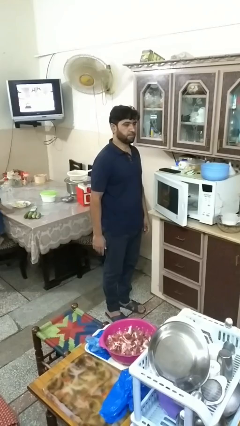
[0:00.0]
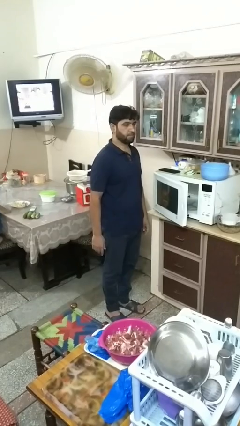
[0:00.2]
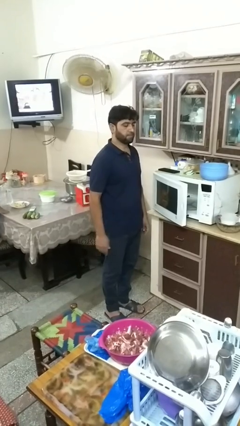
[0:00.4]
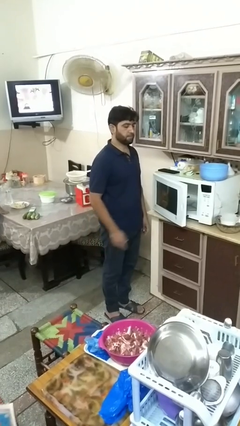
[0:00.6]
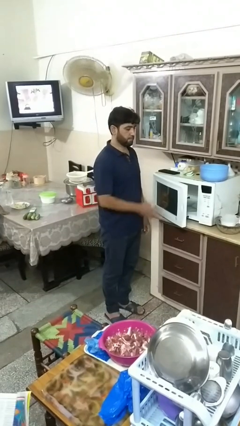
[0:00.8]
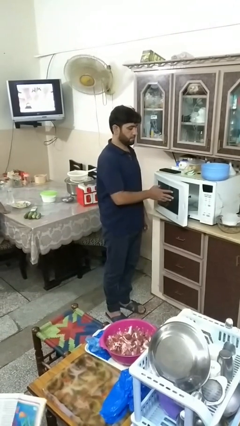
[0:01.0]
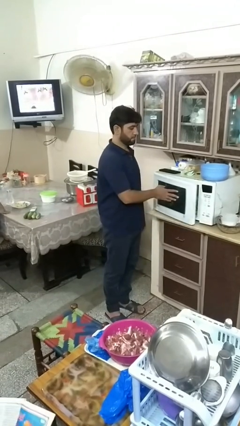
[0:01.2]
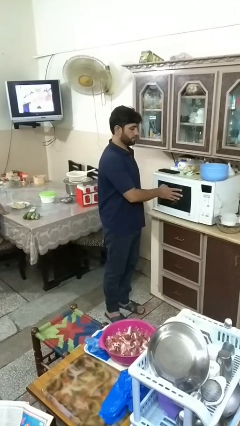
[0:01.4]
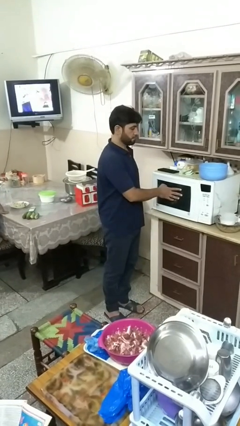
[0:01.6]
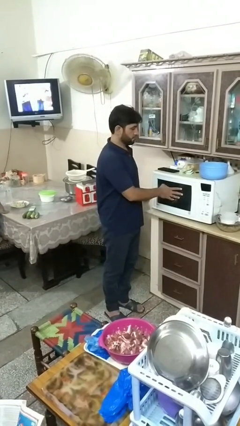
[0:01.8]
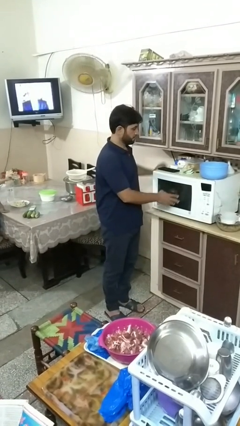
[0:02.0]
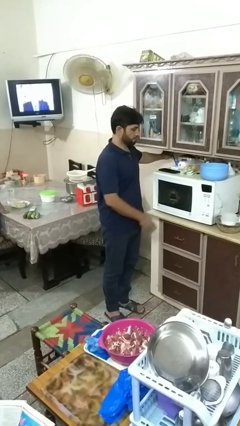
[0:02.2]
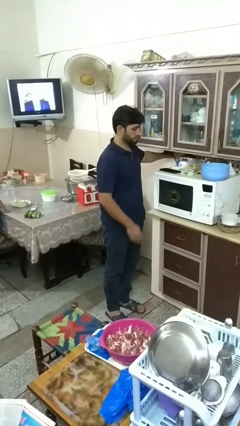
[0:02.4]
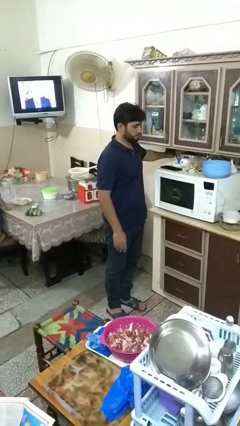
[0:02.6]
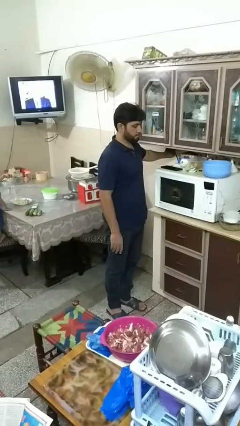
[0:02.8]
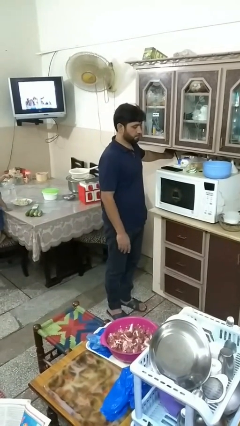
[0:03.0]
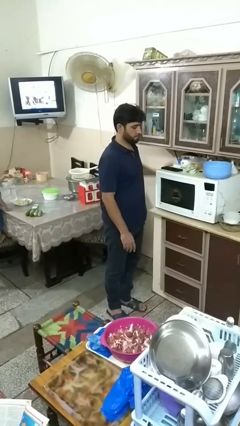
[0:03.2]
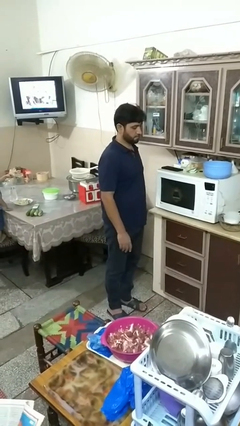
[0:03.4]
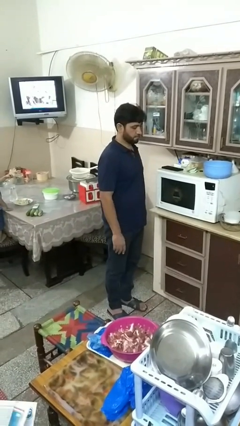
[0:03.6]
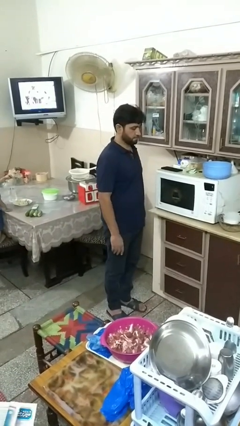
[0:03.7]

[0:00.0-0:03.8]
person closes oven door

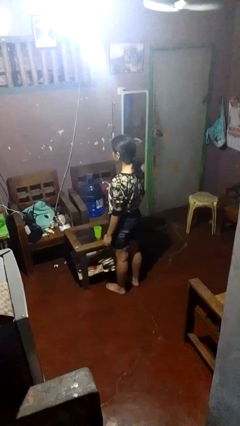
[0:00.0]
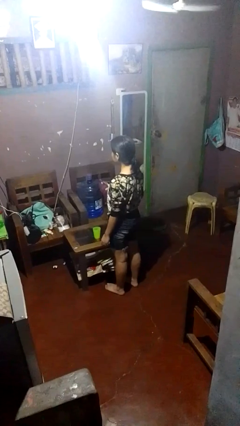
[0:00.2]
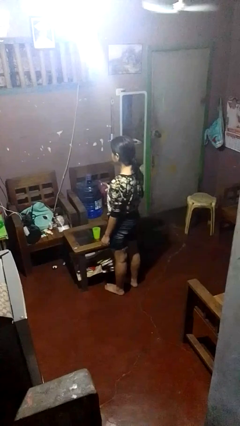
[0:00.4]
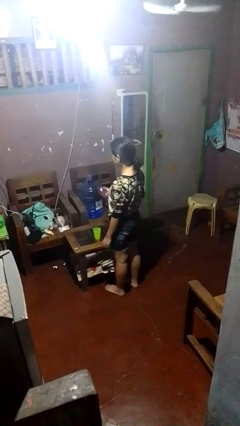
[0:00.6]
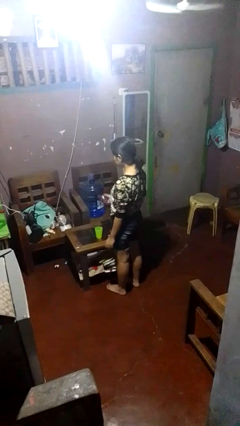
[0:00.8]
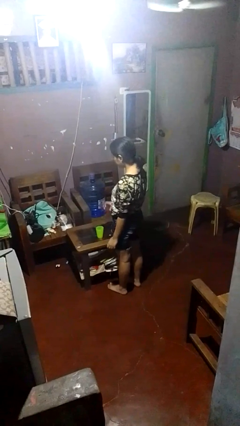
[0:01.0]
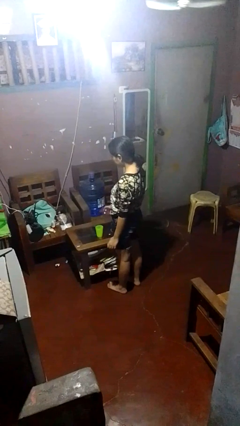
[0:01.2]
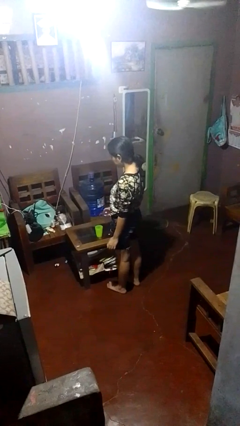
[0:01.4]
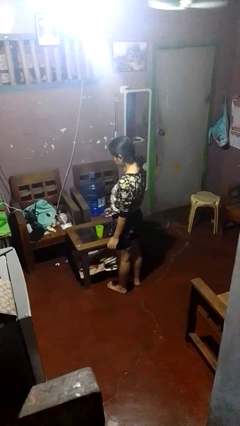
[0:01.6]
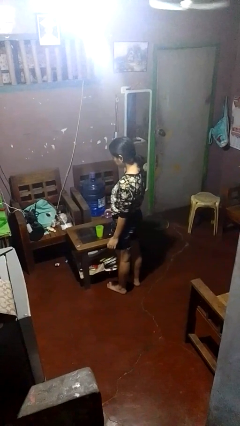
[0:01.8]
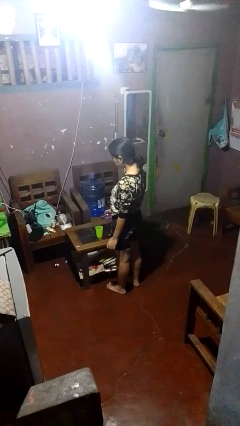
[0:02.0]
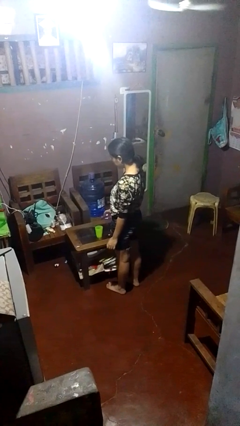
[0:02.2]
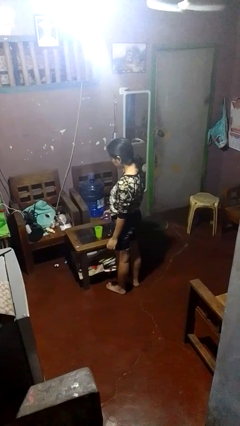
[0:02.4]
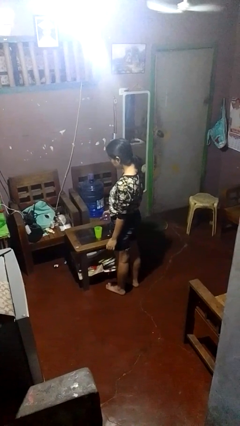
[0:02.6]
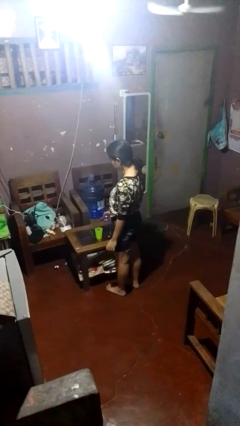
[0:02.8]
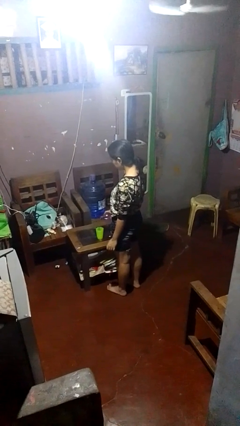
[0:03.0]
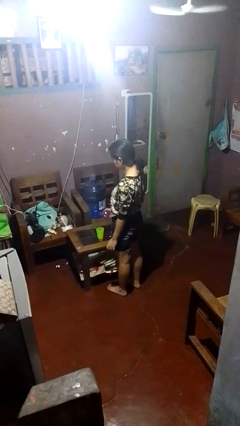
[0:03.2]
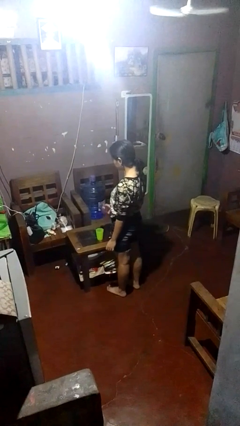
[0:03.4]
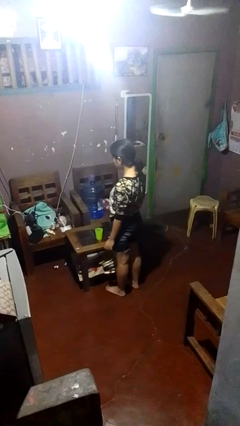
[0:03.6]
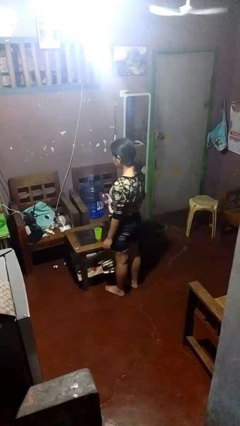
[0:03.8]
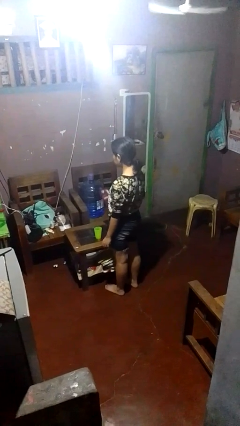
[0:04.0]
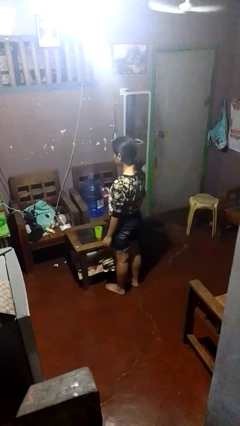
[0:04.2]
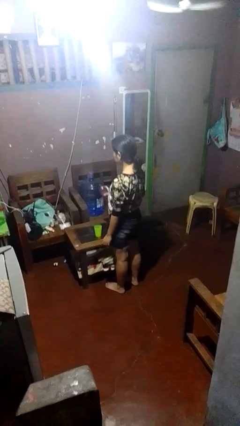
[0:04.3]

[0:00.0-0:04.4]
person pours liquid into cup

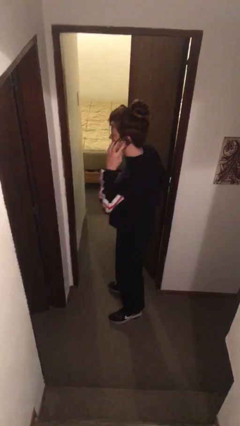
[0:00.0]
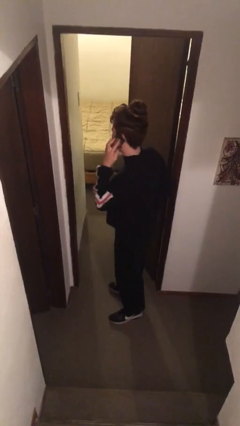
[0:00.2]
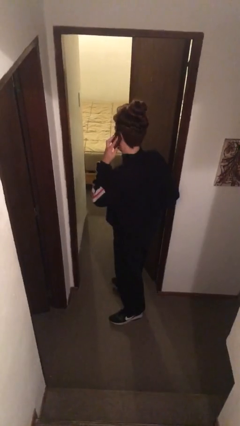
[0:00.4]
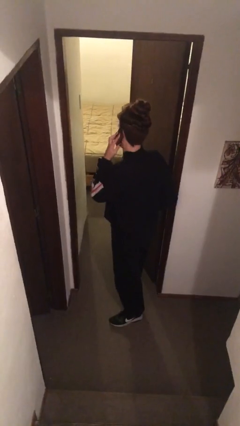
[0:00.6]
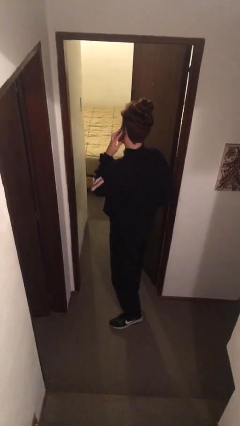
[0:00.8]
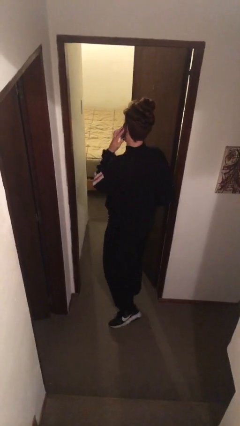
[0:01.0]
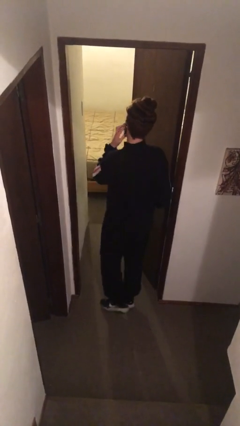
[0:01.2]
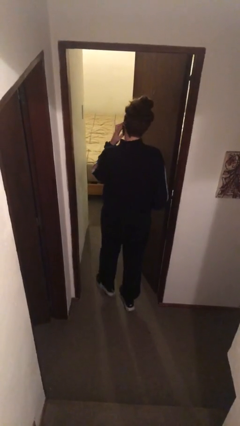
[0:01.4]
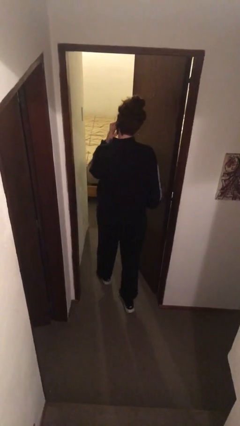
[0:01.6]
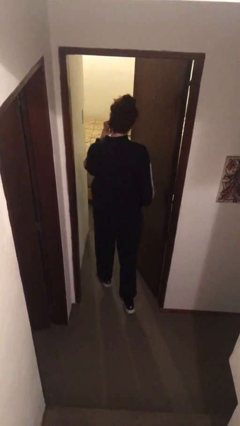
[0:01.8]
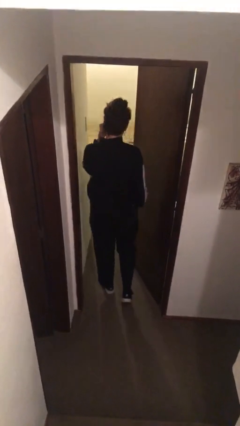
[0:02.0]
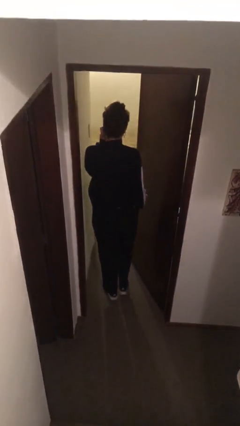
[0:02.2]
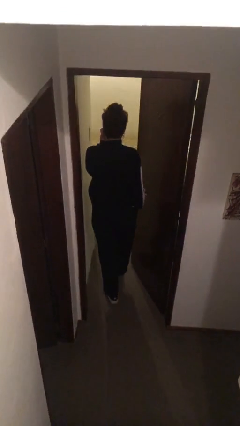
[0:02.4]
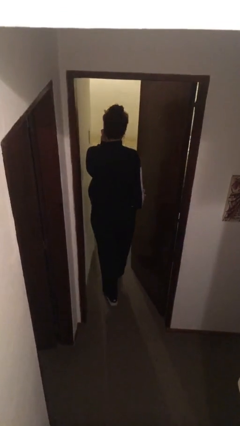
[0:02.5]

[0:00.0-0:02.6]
person exits scene through structure

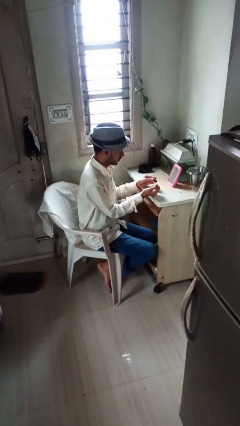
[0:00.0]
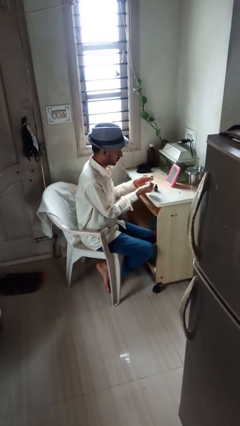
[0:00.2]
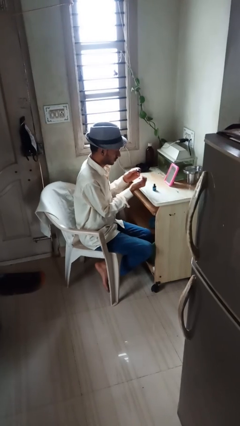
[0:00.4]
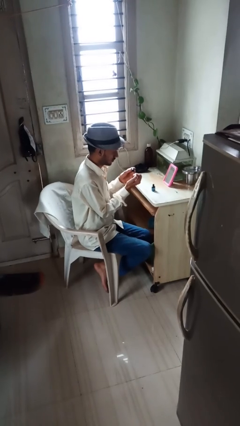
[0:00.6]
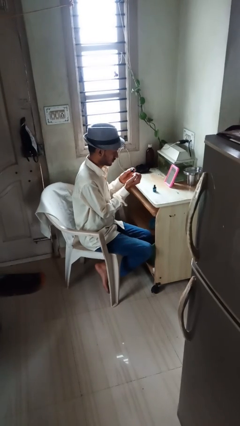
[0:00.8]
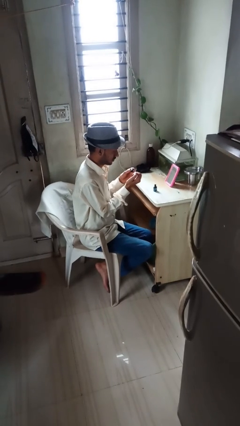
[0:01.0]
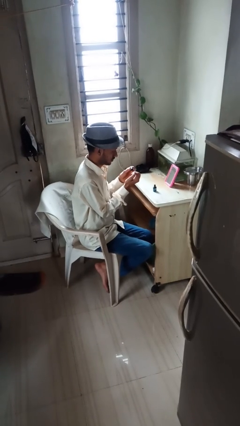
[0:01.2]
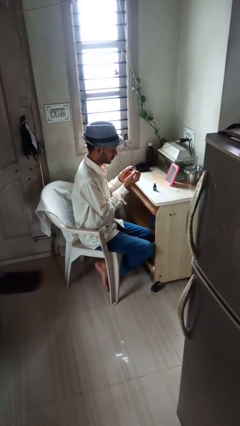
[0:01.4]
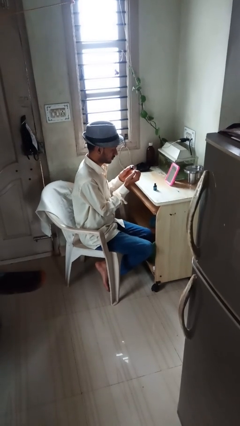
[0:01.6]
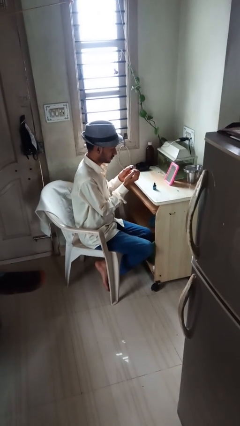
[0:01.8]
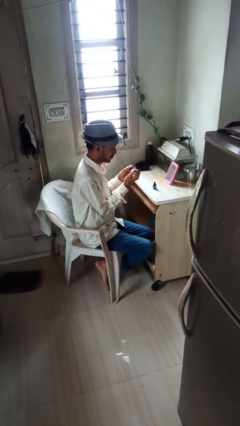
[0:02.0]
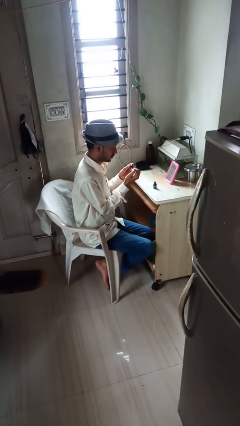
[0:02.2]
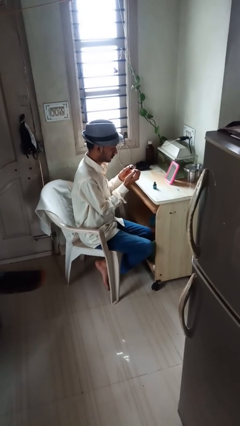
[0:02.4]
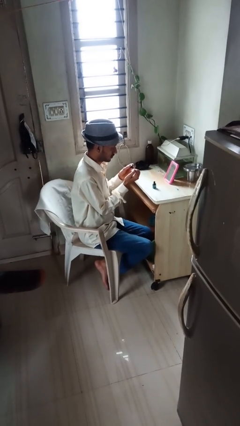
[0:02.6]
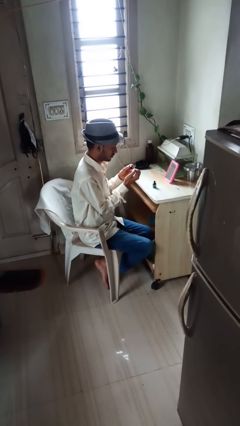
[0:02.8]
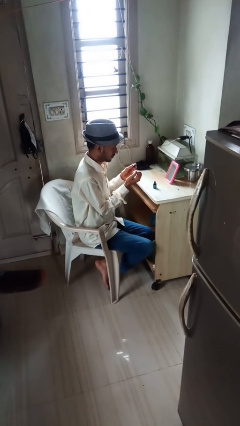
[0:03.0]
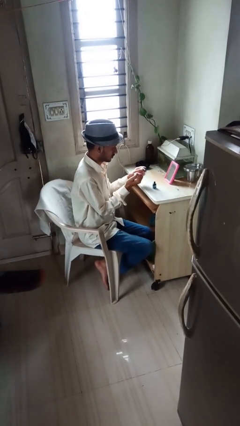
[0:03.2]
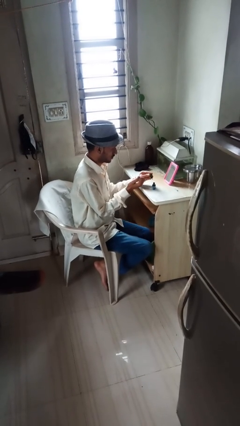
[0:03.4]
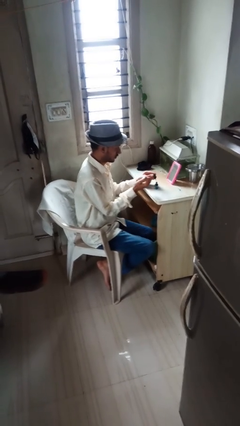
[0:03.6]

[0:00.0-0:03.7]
person paints fingernails

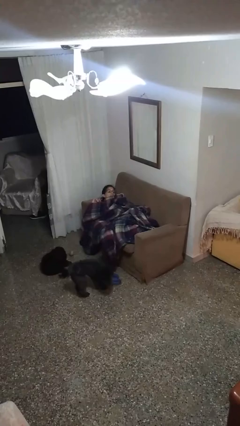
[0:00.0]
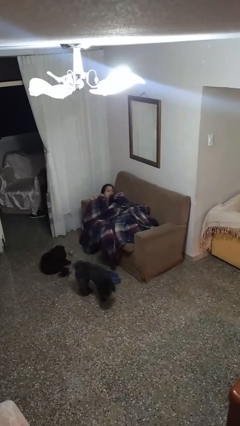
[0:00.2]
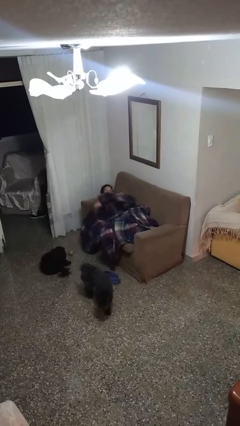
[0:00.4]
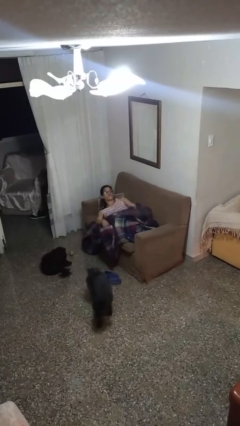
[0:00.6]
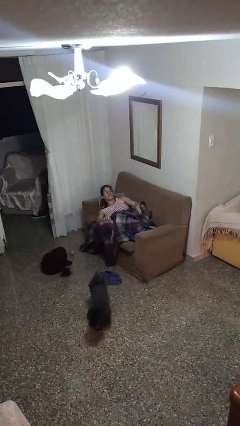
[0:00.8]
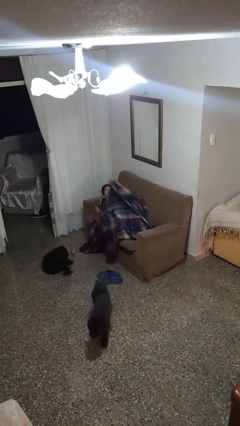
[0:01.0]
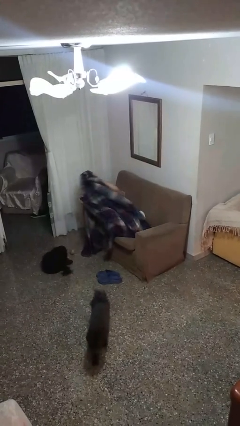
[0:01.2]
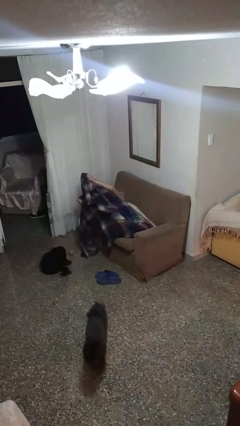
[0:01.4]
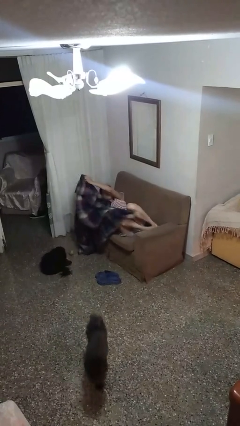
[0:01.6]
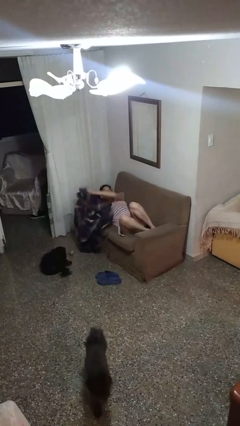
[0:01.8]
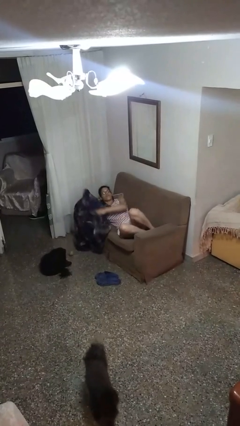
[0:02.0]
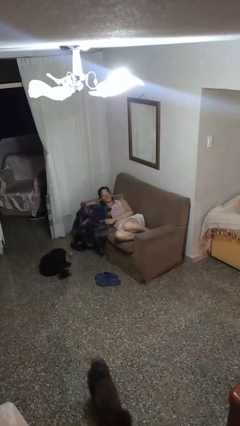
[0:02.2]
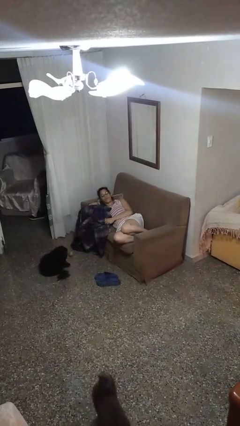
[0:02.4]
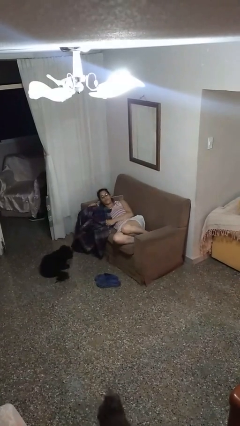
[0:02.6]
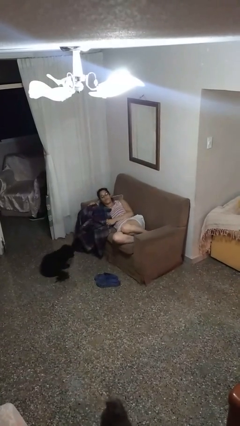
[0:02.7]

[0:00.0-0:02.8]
person uncovers with blanket

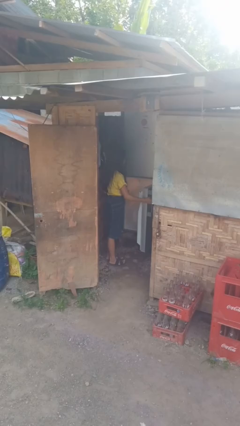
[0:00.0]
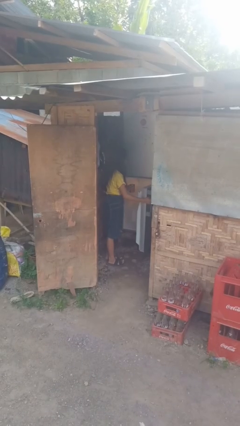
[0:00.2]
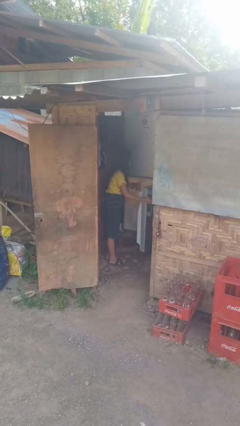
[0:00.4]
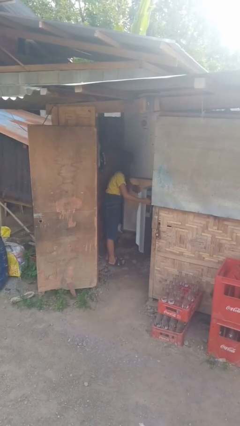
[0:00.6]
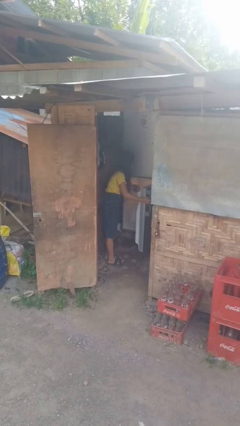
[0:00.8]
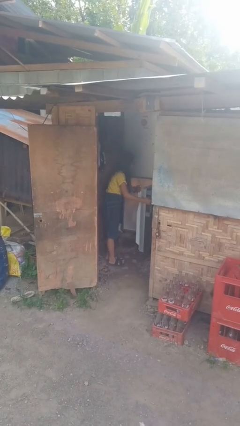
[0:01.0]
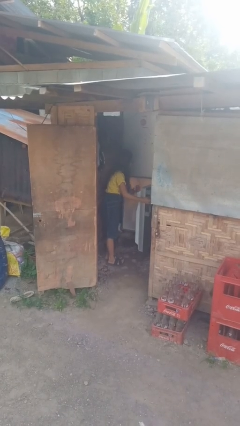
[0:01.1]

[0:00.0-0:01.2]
person puts object into refrigerator
